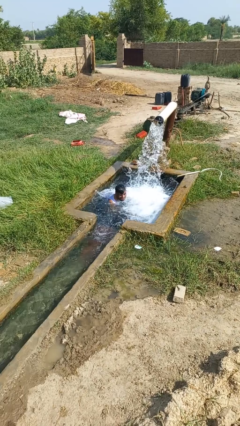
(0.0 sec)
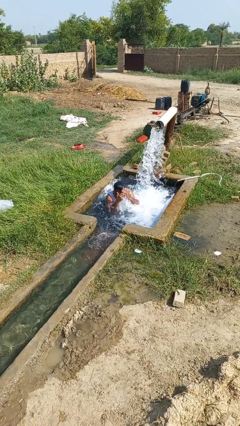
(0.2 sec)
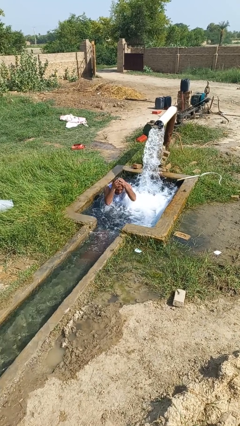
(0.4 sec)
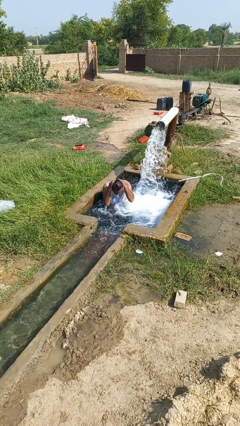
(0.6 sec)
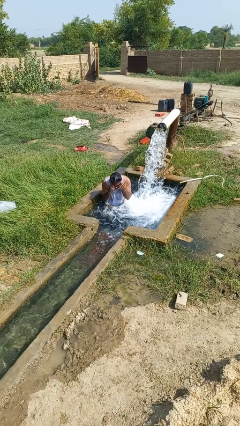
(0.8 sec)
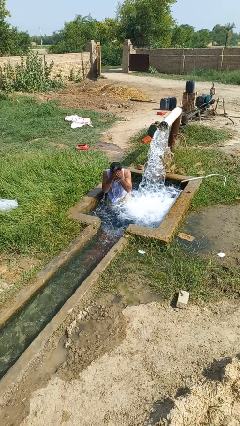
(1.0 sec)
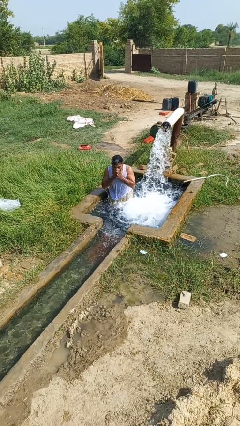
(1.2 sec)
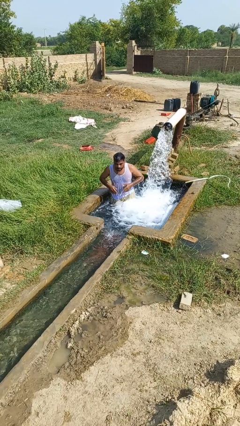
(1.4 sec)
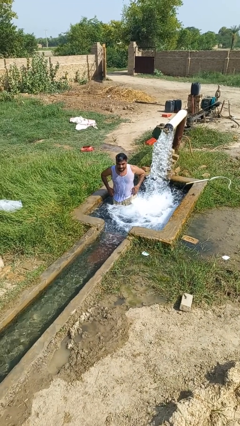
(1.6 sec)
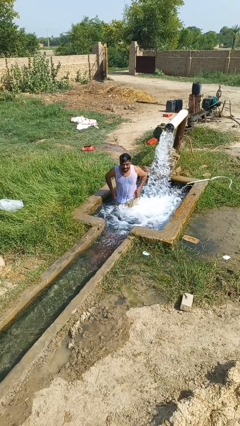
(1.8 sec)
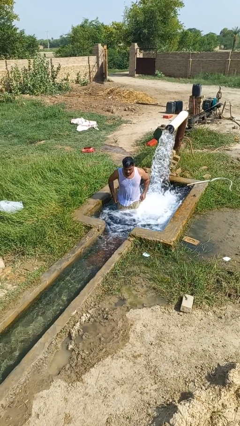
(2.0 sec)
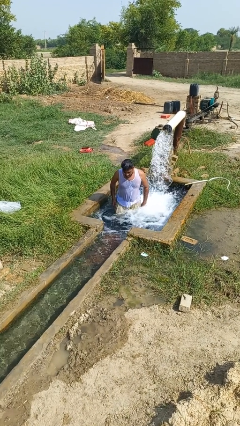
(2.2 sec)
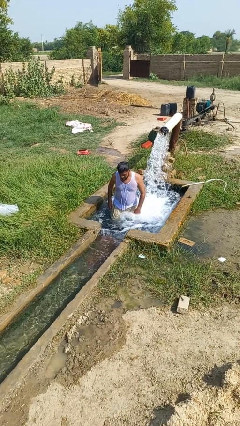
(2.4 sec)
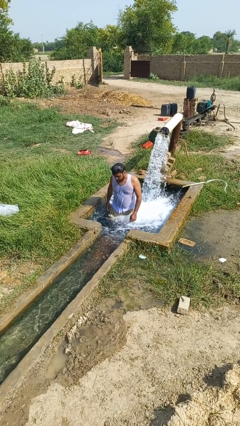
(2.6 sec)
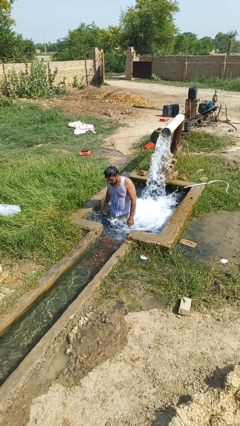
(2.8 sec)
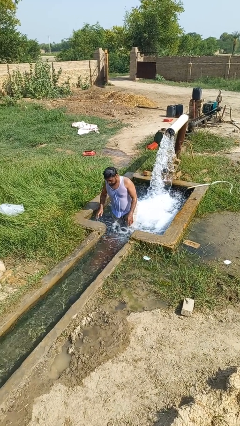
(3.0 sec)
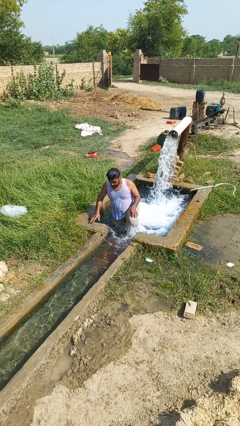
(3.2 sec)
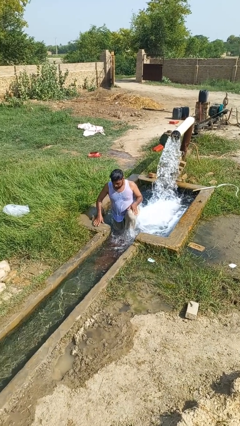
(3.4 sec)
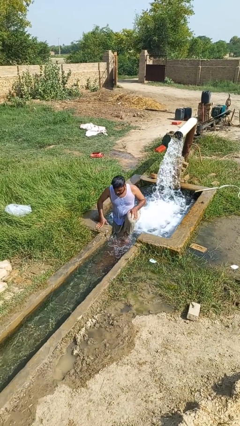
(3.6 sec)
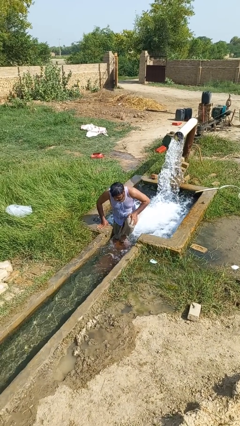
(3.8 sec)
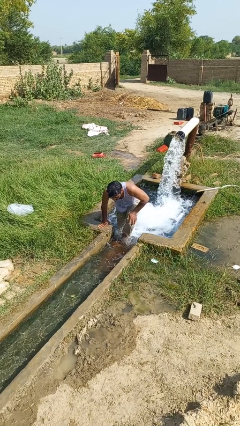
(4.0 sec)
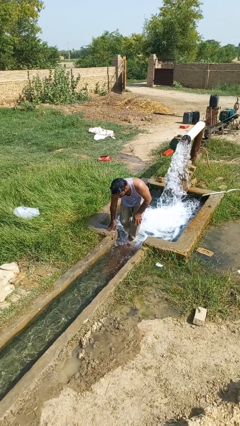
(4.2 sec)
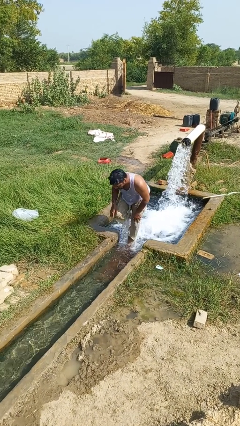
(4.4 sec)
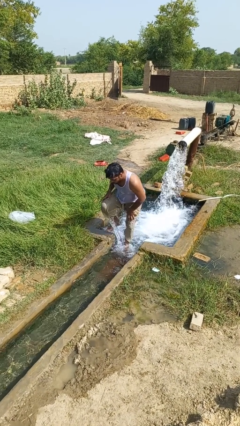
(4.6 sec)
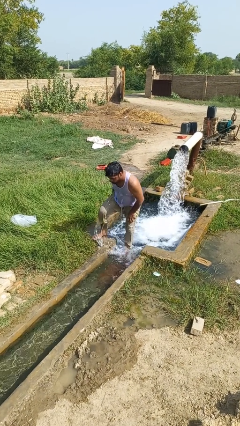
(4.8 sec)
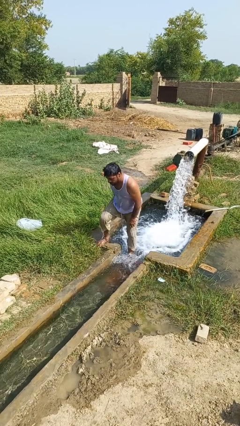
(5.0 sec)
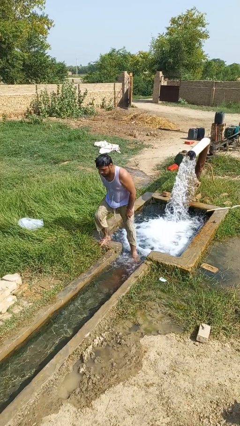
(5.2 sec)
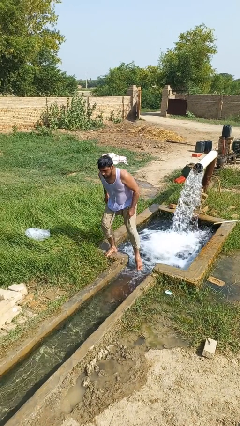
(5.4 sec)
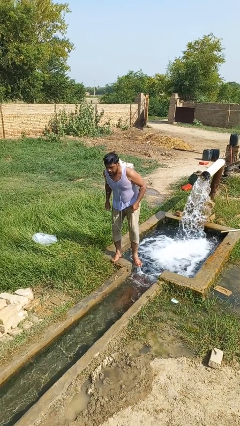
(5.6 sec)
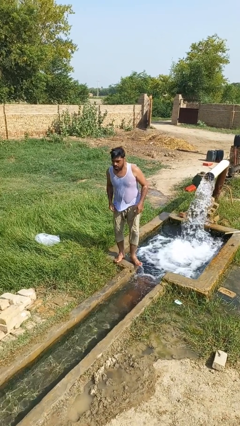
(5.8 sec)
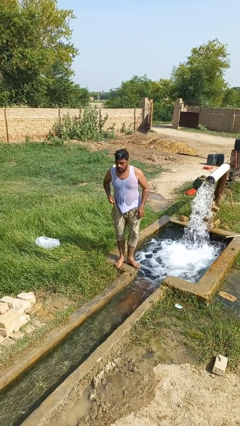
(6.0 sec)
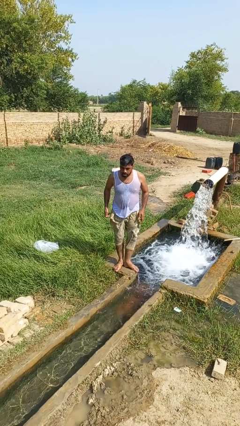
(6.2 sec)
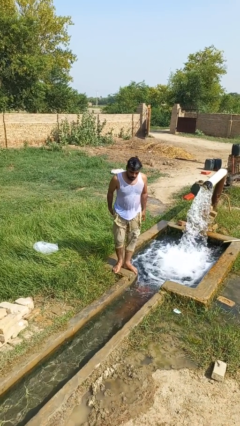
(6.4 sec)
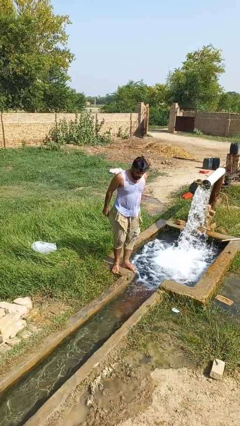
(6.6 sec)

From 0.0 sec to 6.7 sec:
person exits pool

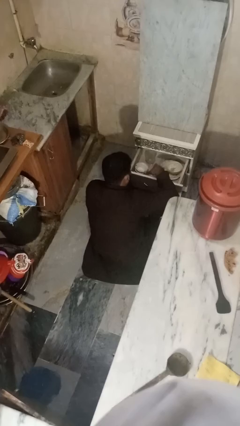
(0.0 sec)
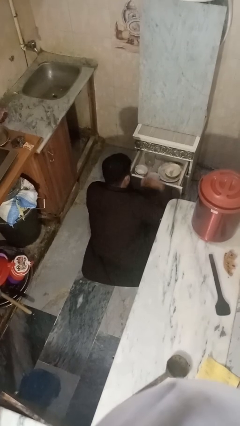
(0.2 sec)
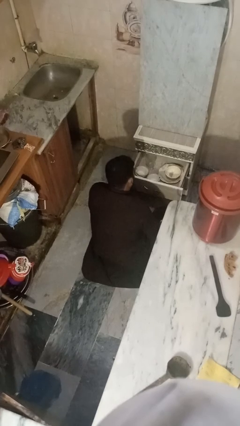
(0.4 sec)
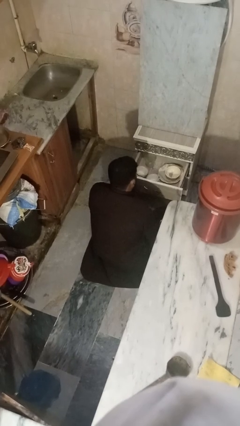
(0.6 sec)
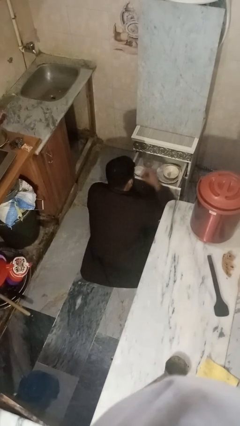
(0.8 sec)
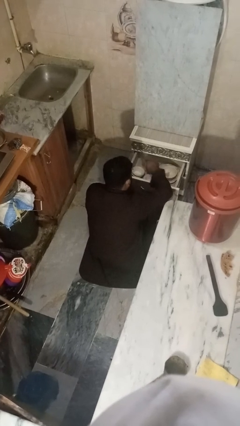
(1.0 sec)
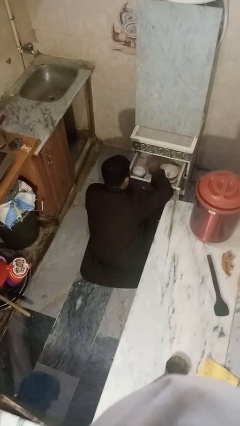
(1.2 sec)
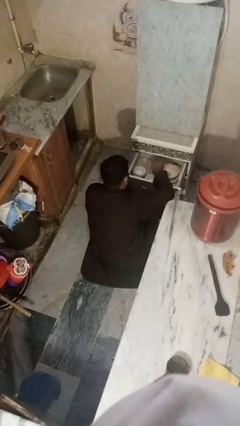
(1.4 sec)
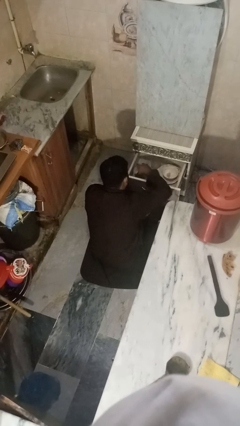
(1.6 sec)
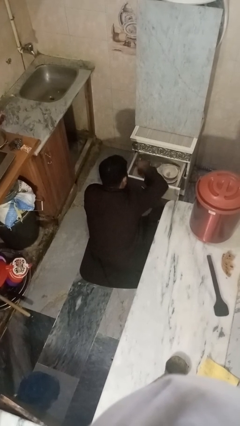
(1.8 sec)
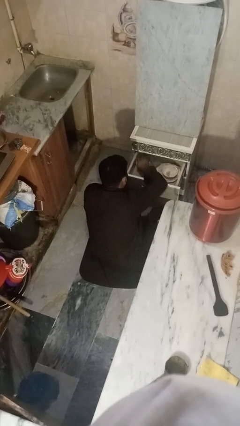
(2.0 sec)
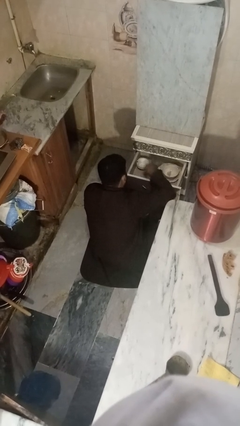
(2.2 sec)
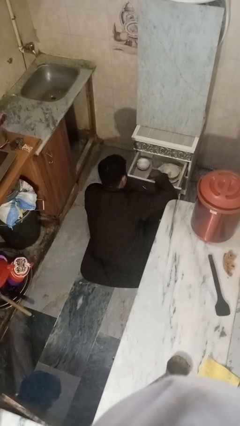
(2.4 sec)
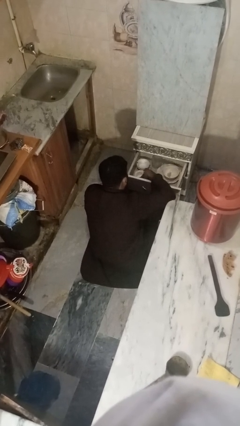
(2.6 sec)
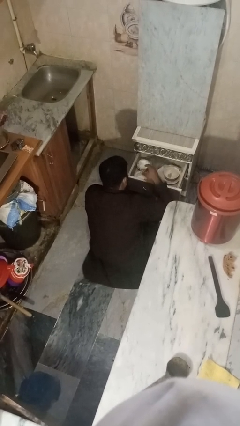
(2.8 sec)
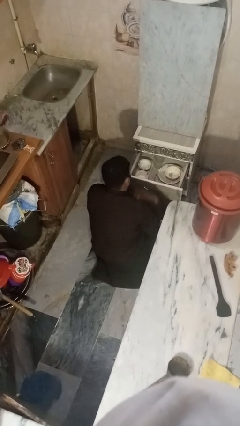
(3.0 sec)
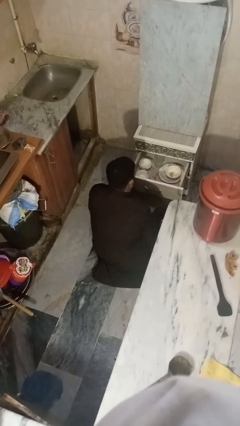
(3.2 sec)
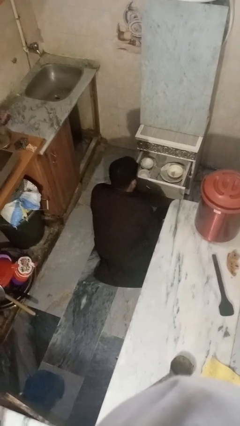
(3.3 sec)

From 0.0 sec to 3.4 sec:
person searches in kitchen drawer

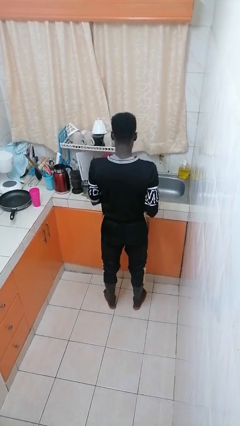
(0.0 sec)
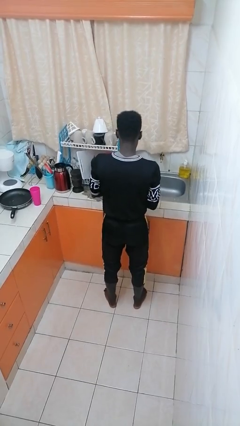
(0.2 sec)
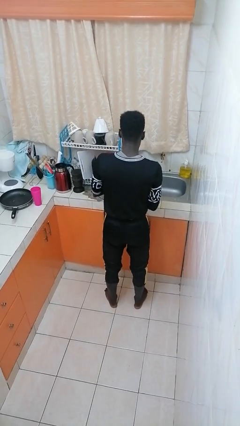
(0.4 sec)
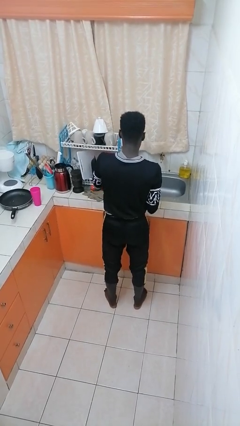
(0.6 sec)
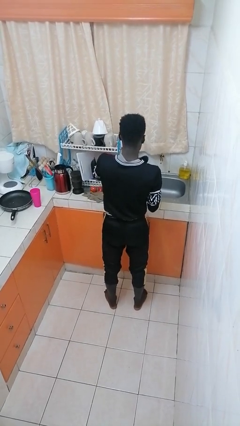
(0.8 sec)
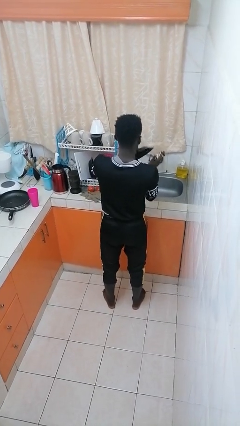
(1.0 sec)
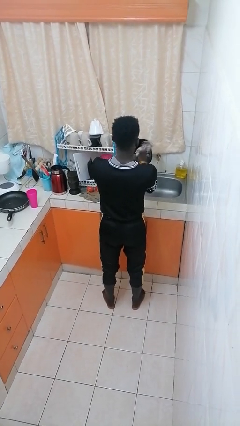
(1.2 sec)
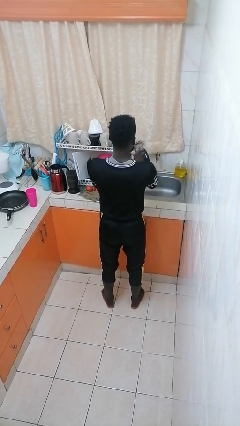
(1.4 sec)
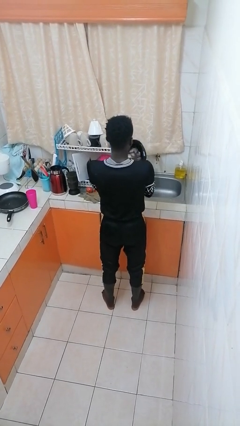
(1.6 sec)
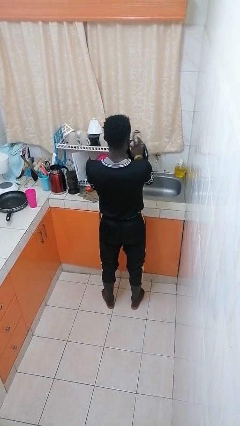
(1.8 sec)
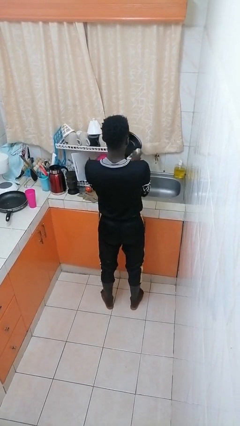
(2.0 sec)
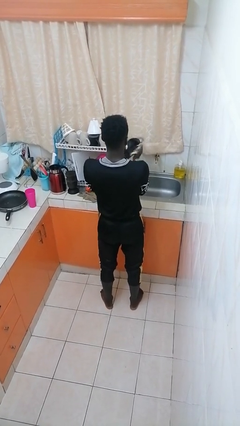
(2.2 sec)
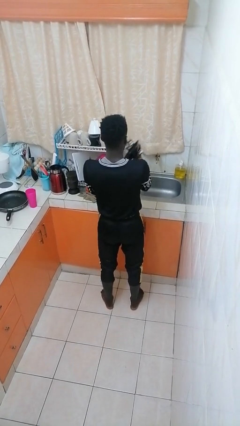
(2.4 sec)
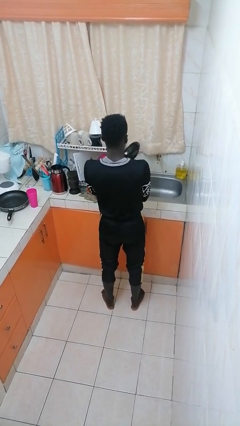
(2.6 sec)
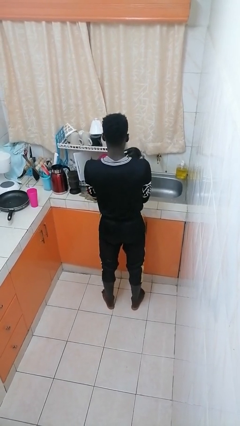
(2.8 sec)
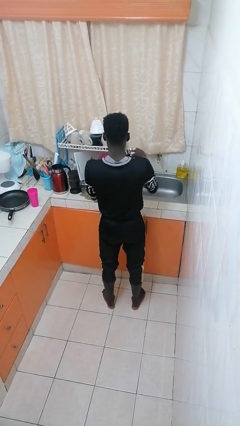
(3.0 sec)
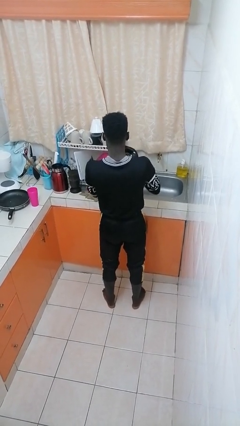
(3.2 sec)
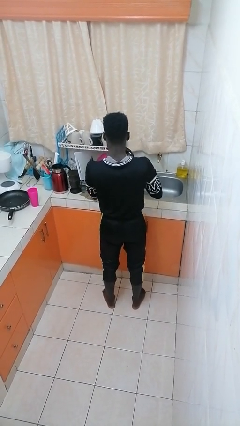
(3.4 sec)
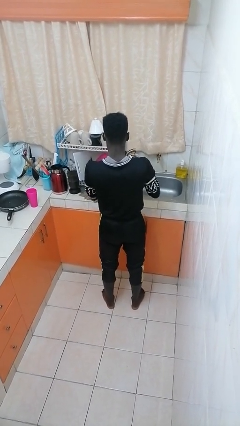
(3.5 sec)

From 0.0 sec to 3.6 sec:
person dries dish

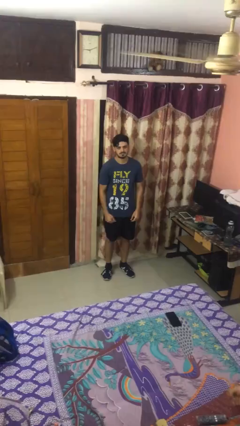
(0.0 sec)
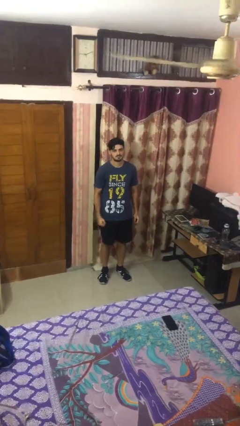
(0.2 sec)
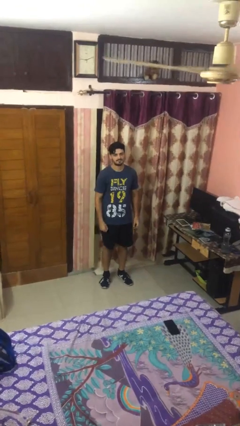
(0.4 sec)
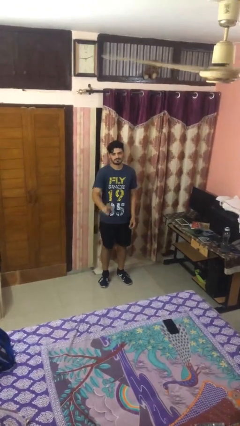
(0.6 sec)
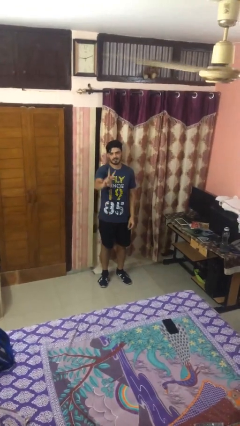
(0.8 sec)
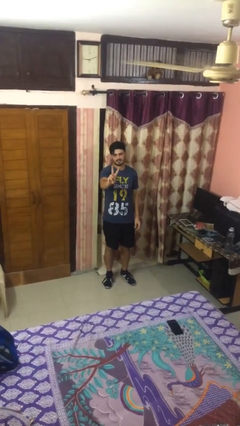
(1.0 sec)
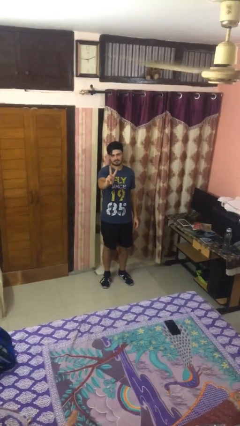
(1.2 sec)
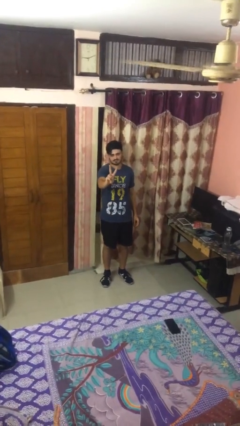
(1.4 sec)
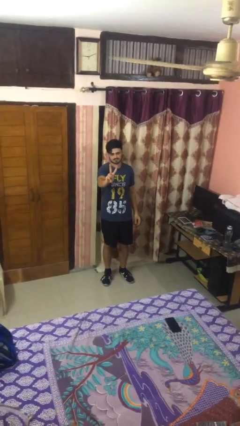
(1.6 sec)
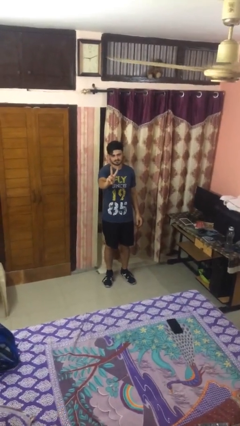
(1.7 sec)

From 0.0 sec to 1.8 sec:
person gestures peace

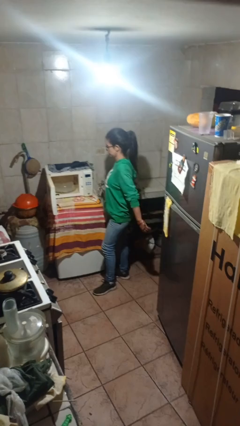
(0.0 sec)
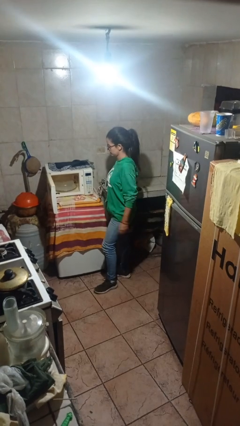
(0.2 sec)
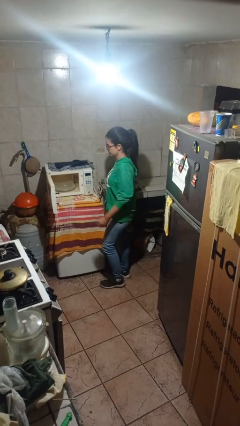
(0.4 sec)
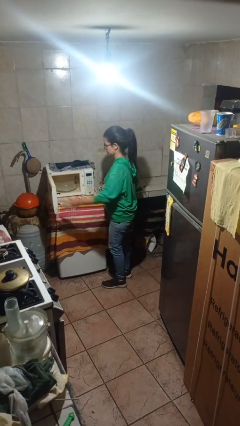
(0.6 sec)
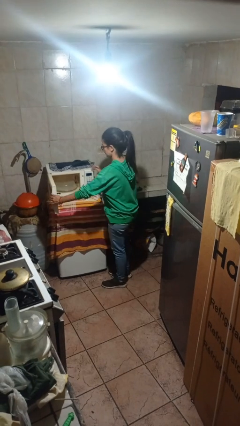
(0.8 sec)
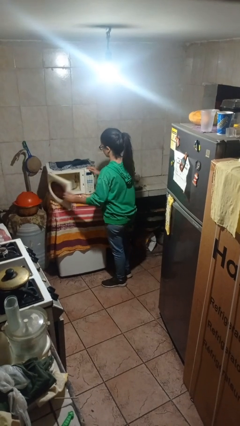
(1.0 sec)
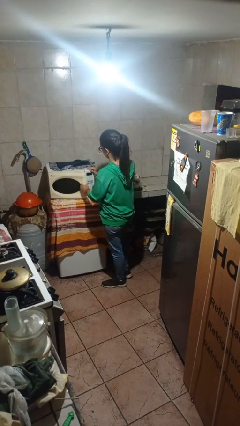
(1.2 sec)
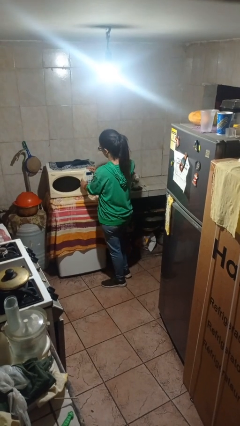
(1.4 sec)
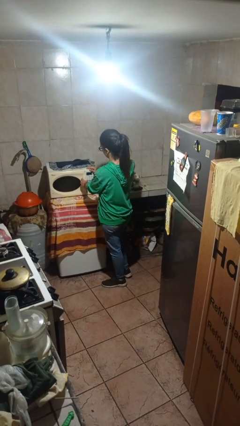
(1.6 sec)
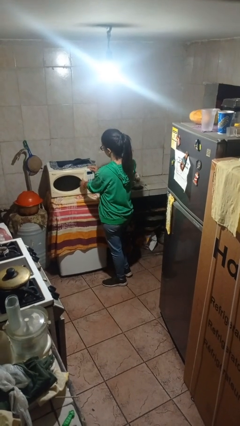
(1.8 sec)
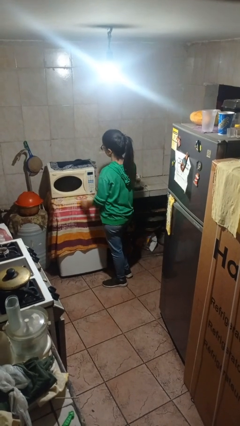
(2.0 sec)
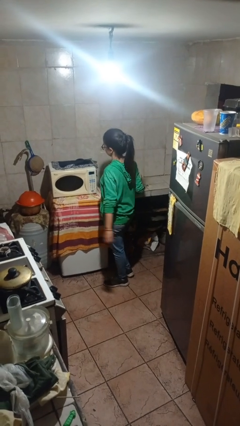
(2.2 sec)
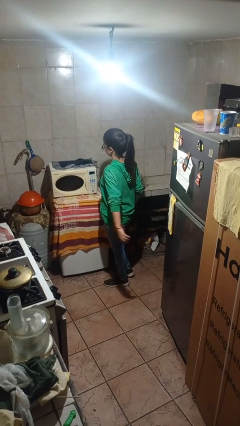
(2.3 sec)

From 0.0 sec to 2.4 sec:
person closes microwave
